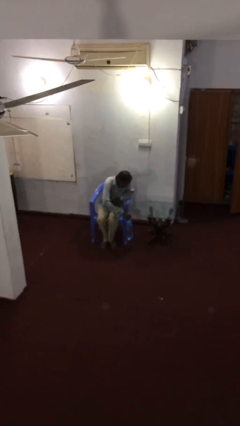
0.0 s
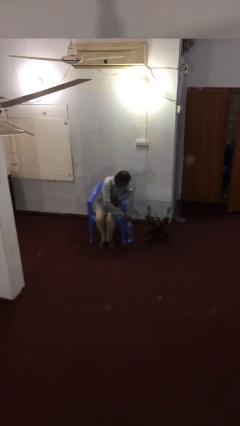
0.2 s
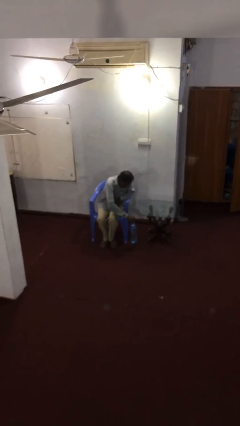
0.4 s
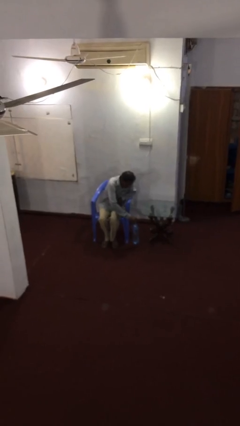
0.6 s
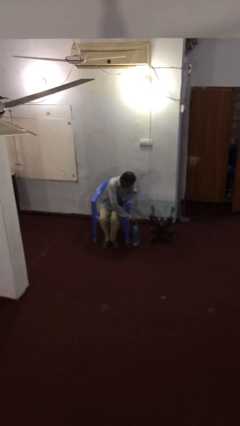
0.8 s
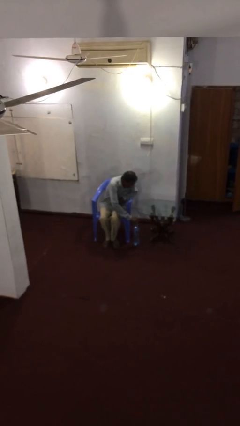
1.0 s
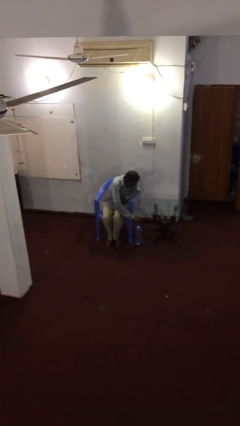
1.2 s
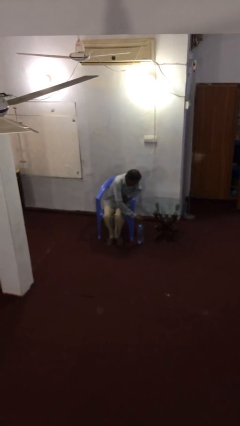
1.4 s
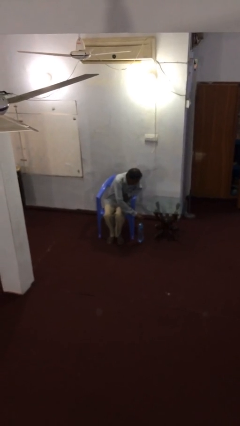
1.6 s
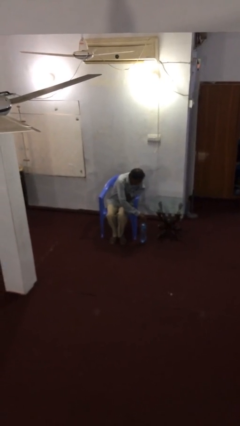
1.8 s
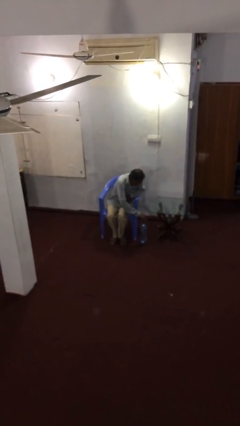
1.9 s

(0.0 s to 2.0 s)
person puts down object on floor

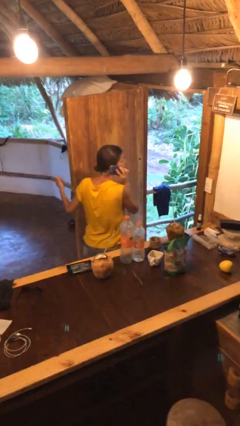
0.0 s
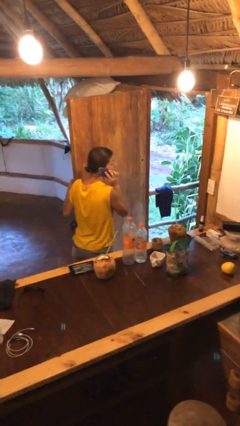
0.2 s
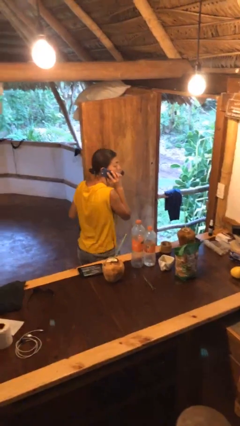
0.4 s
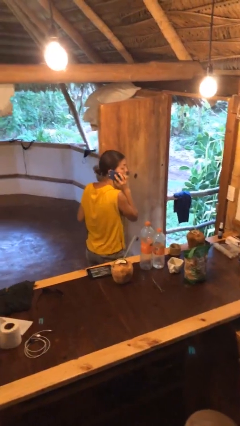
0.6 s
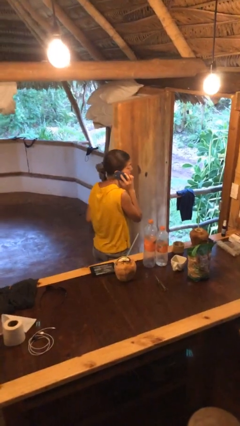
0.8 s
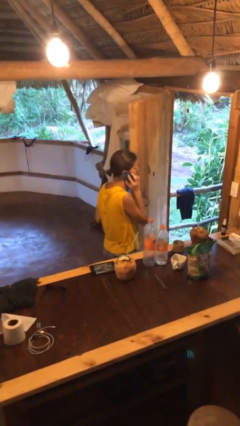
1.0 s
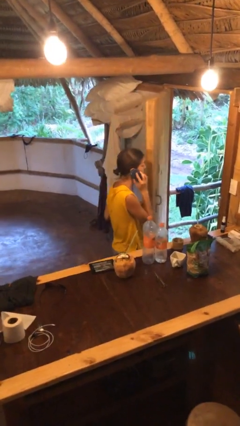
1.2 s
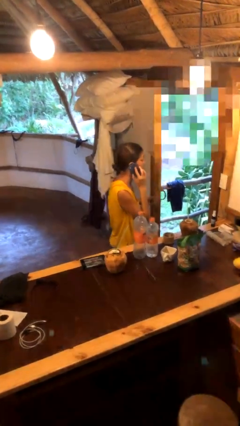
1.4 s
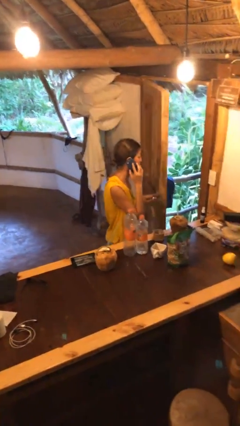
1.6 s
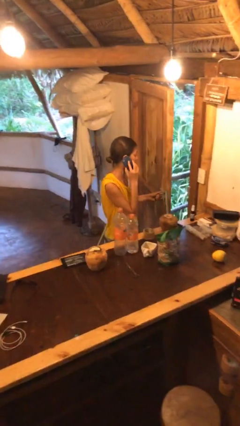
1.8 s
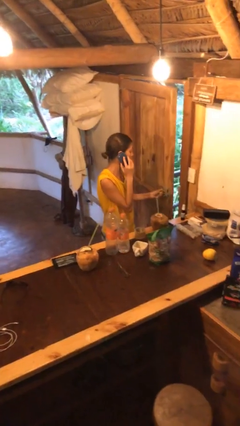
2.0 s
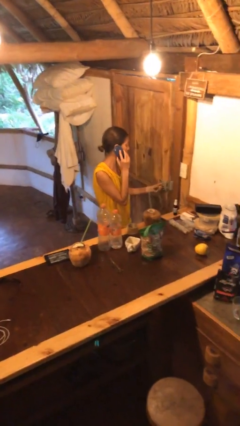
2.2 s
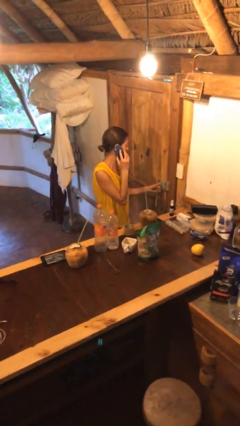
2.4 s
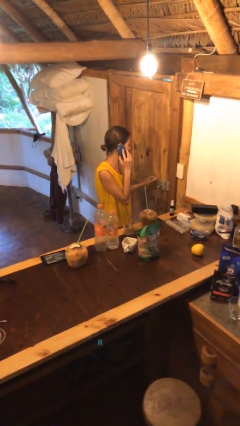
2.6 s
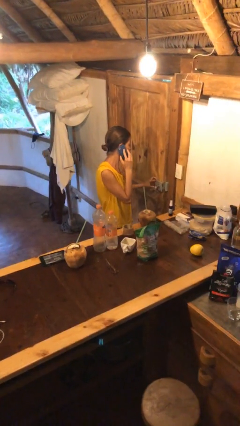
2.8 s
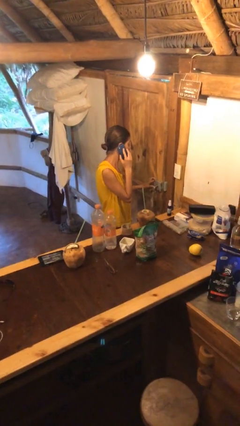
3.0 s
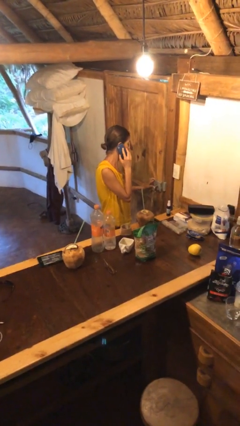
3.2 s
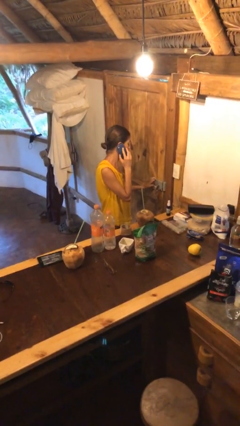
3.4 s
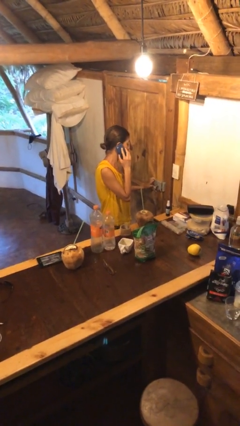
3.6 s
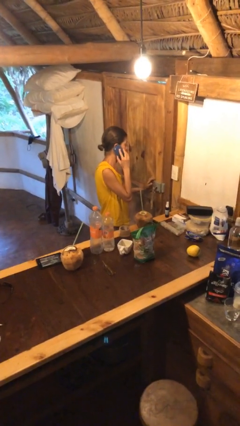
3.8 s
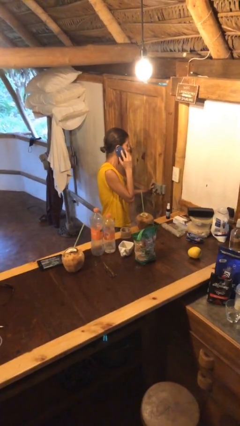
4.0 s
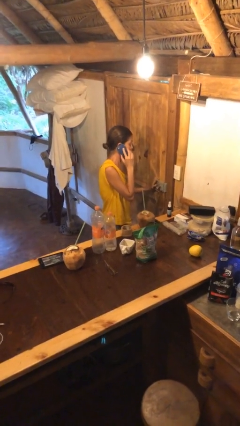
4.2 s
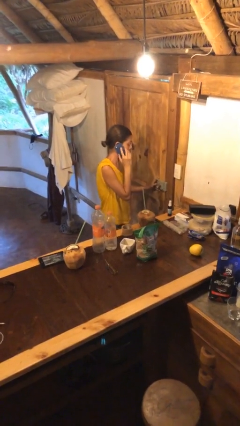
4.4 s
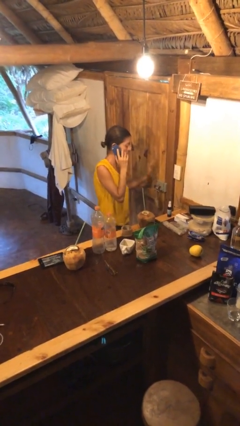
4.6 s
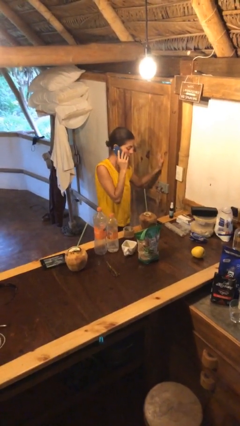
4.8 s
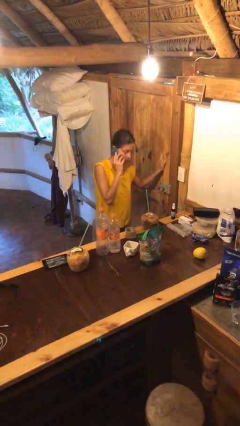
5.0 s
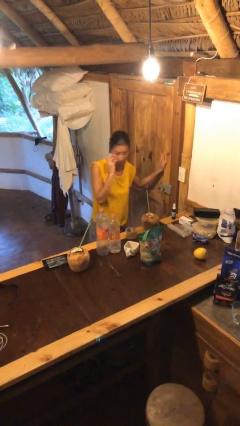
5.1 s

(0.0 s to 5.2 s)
person closes facility door

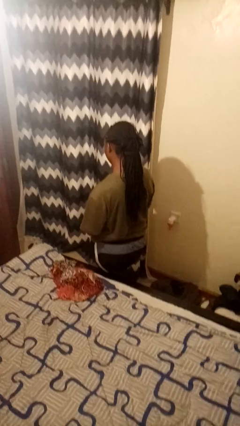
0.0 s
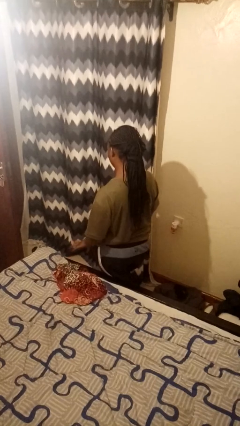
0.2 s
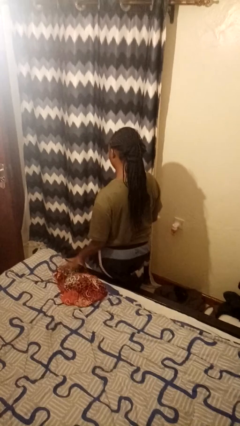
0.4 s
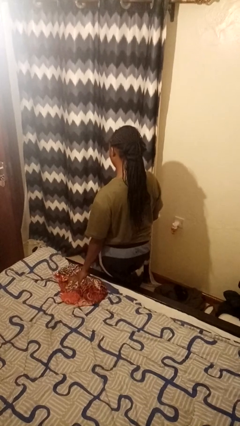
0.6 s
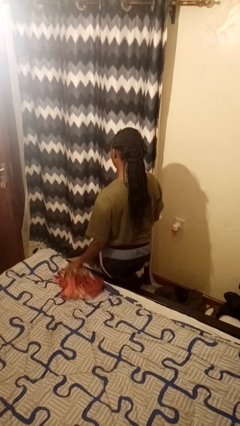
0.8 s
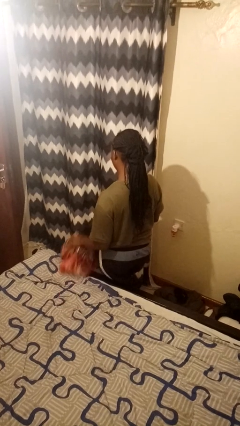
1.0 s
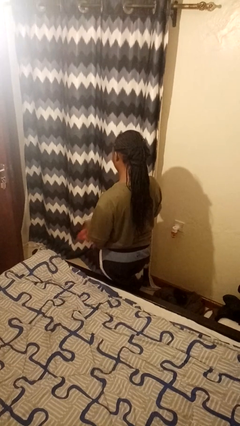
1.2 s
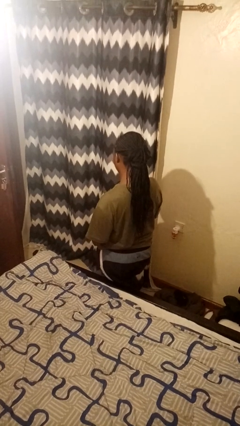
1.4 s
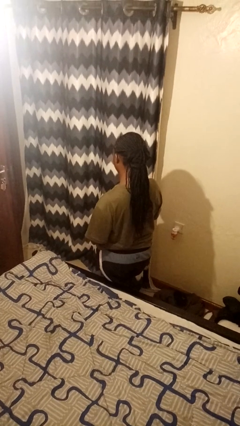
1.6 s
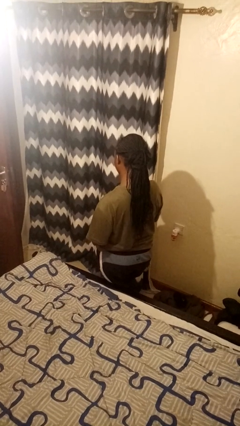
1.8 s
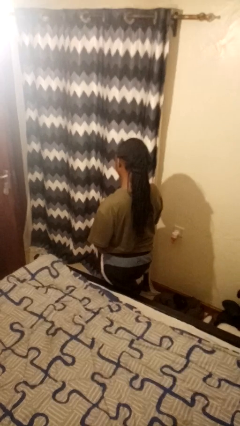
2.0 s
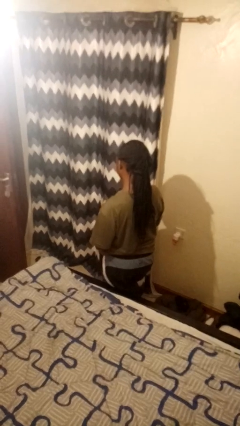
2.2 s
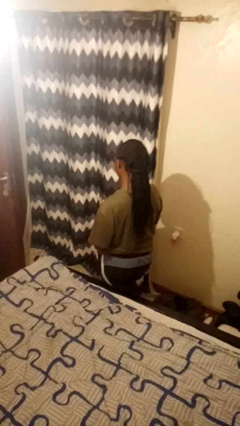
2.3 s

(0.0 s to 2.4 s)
person picks up object from bed

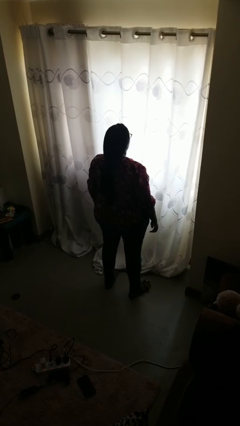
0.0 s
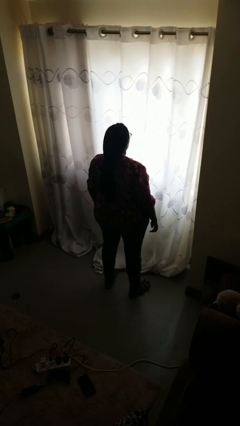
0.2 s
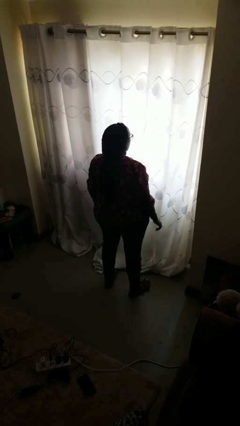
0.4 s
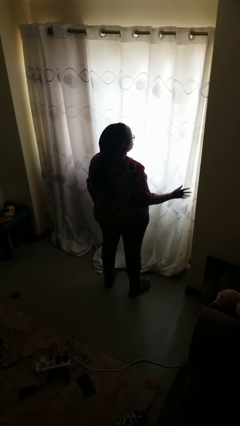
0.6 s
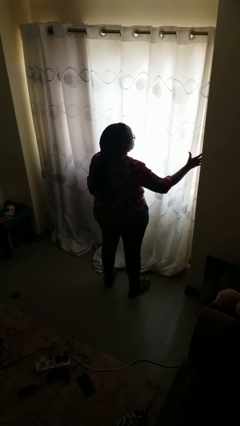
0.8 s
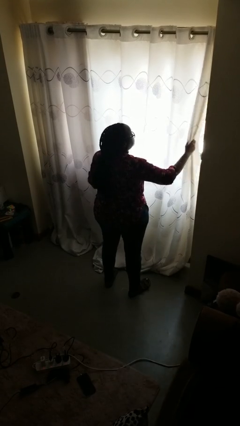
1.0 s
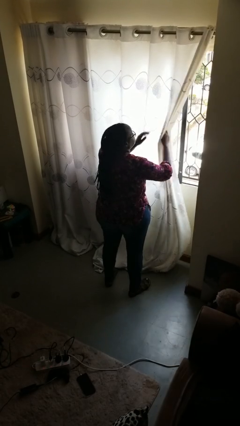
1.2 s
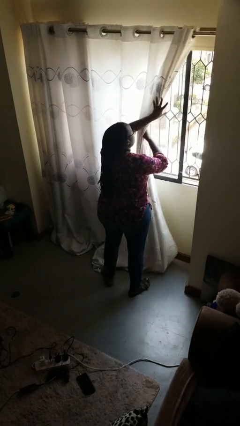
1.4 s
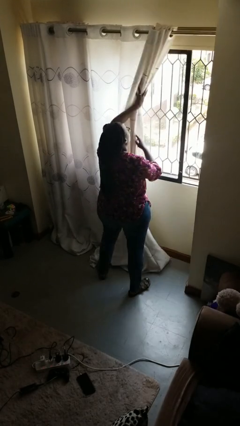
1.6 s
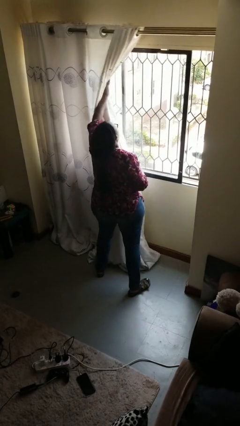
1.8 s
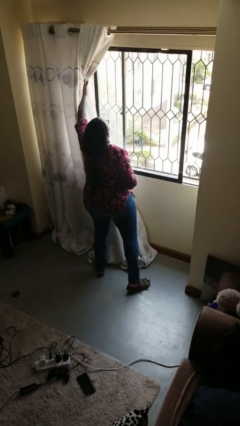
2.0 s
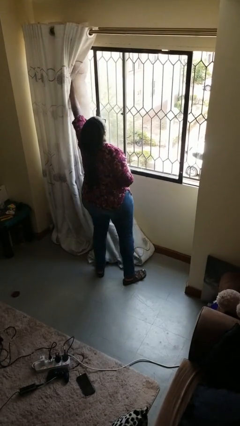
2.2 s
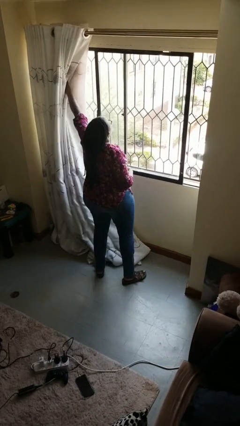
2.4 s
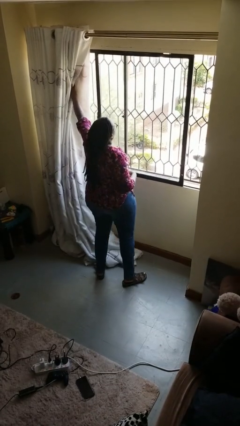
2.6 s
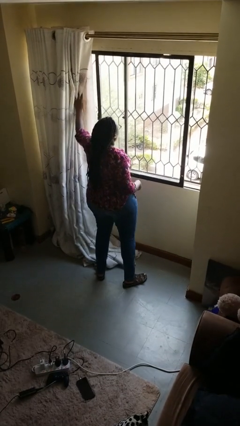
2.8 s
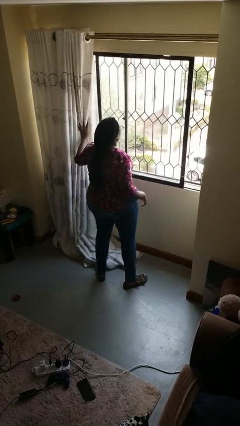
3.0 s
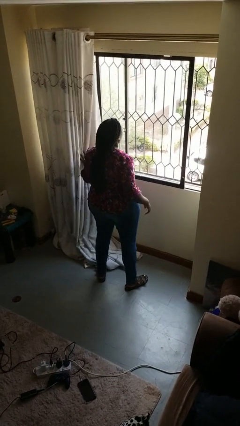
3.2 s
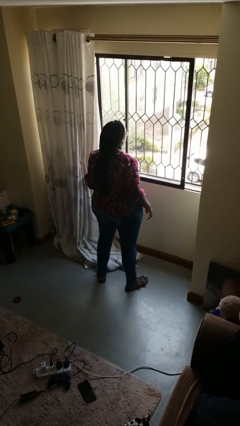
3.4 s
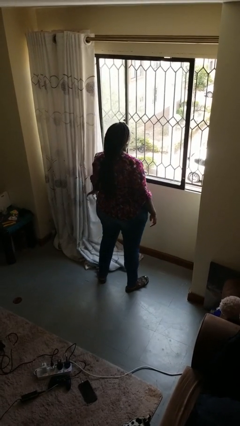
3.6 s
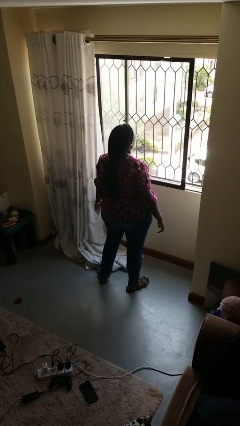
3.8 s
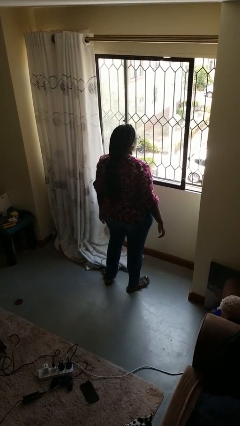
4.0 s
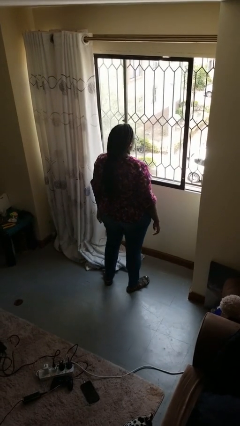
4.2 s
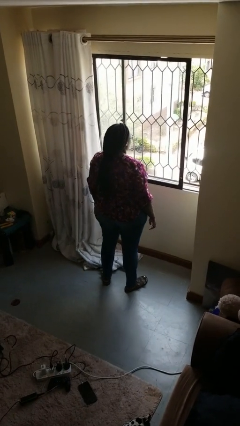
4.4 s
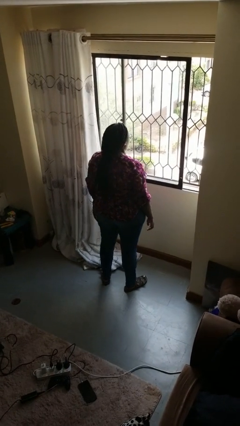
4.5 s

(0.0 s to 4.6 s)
person opens curtains

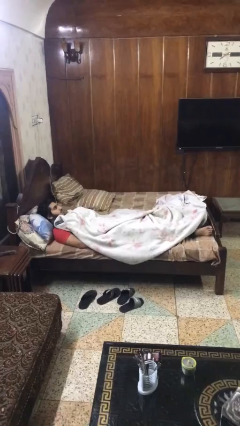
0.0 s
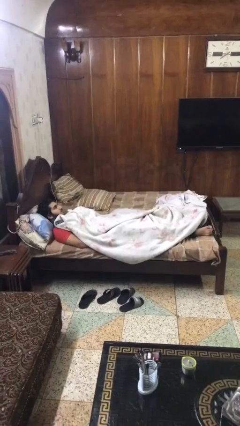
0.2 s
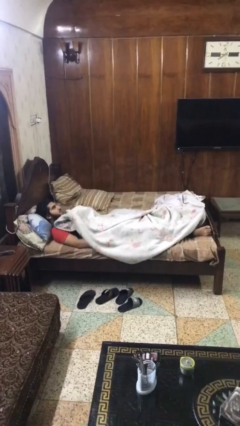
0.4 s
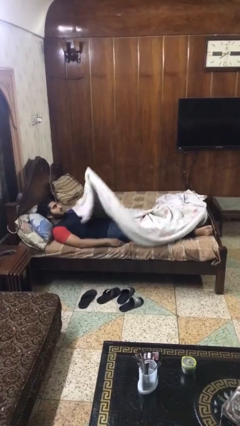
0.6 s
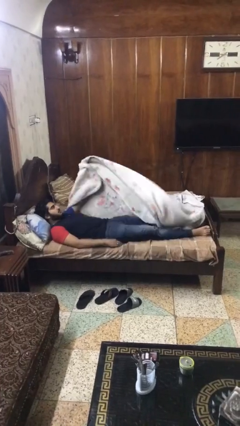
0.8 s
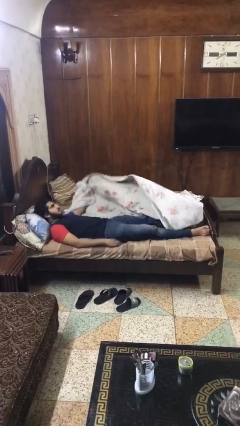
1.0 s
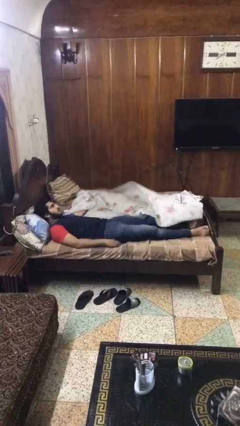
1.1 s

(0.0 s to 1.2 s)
person uncovers with blanket

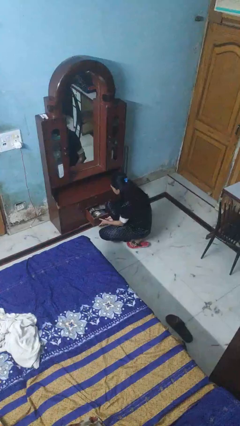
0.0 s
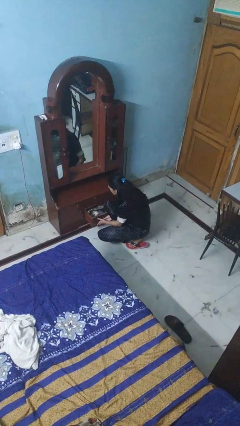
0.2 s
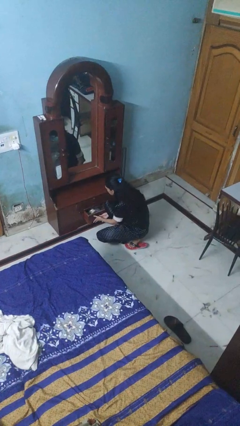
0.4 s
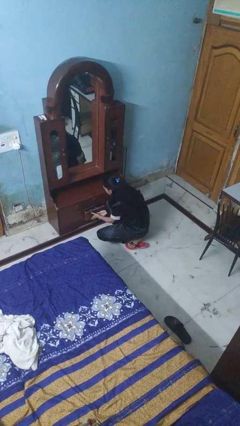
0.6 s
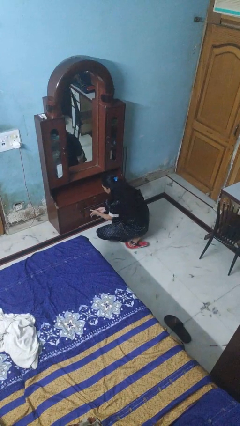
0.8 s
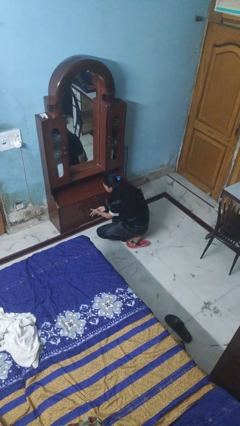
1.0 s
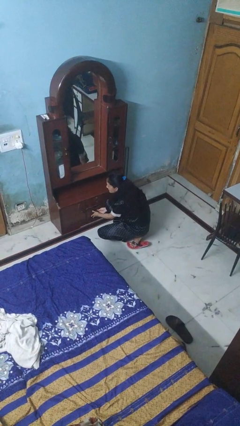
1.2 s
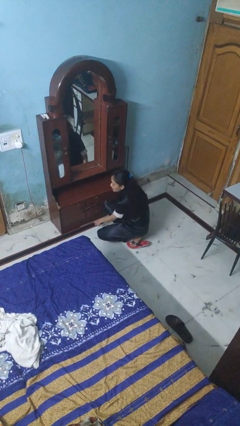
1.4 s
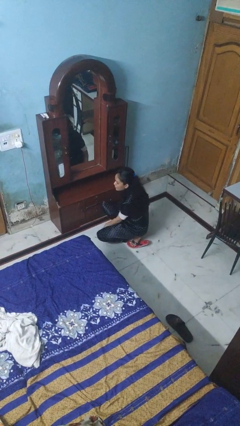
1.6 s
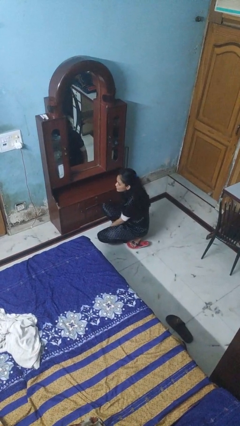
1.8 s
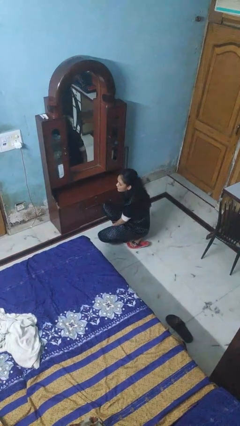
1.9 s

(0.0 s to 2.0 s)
person closes dresser drawer
